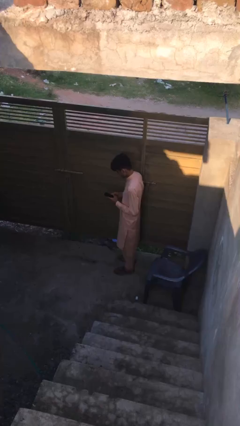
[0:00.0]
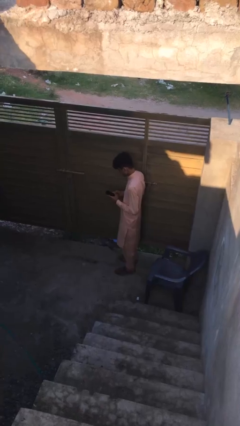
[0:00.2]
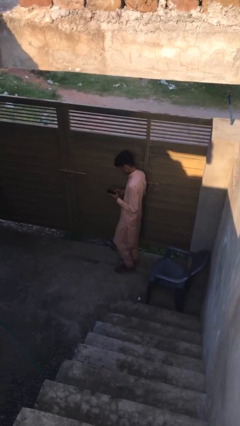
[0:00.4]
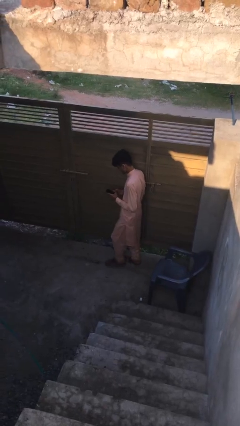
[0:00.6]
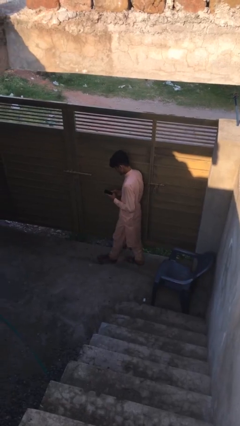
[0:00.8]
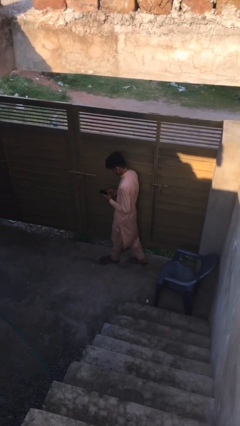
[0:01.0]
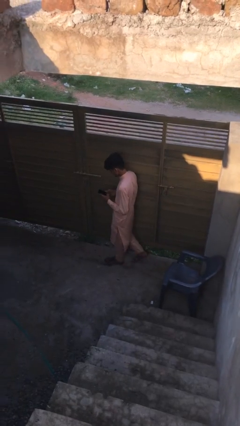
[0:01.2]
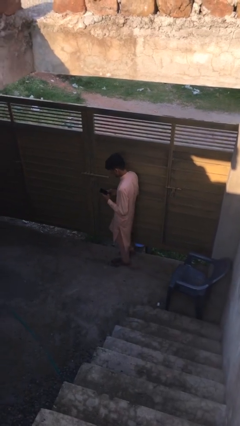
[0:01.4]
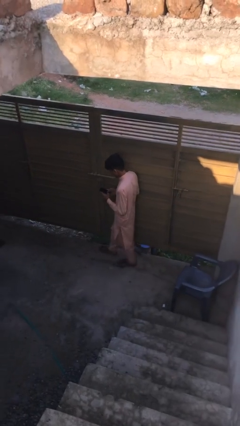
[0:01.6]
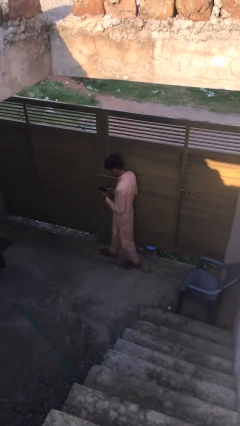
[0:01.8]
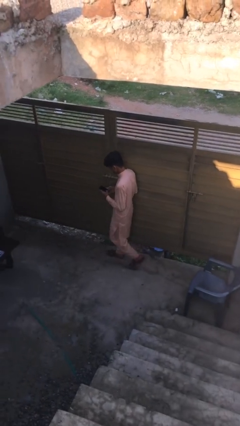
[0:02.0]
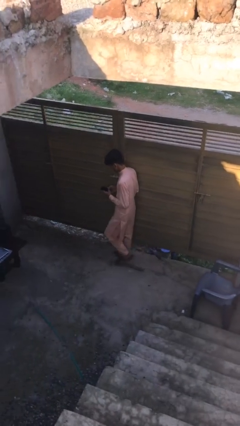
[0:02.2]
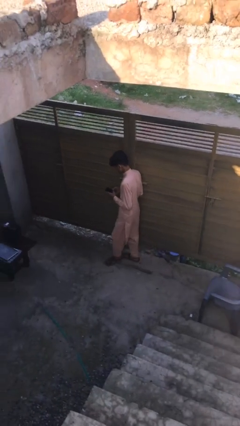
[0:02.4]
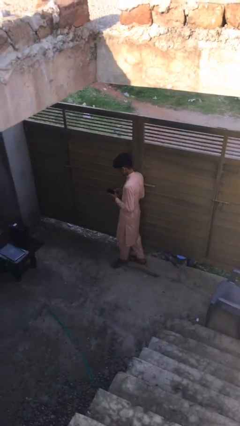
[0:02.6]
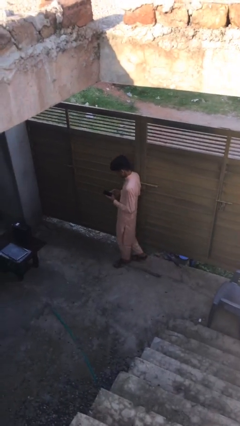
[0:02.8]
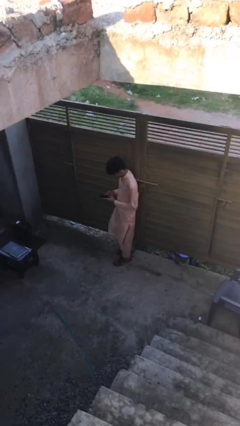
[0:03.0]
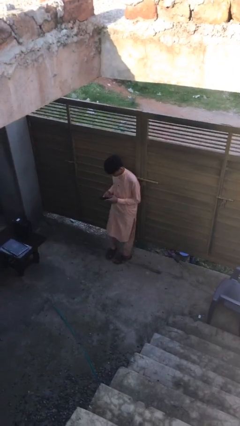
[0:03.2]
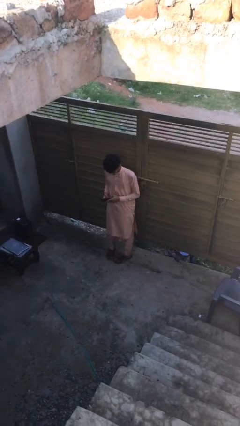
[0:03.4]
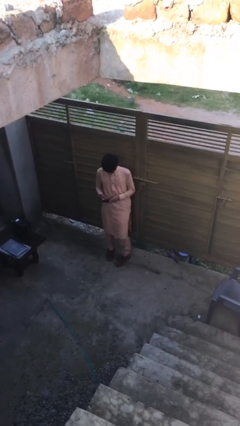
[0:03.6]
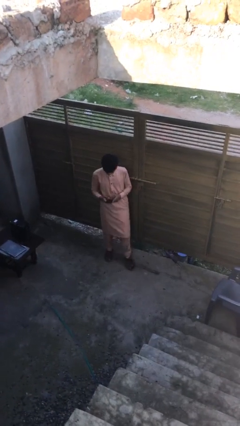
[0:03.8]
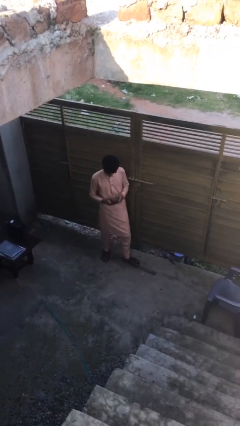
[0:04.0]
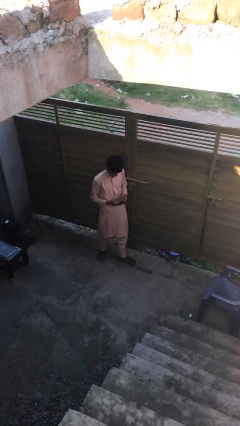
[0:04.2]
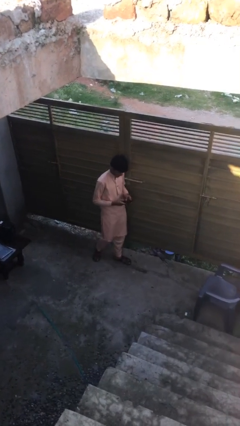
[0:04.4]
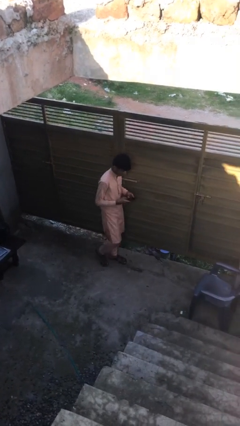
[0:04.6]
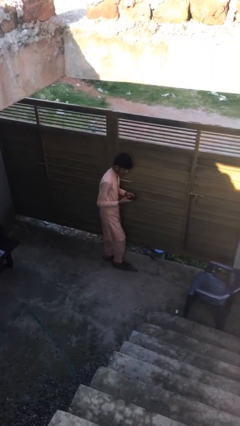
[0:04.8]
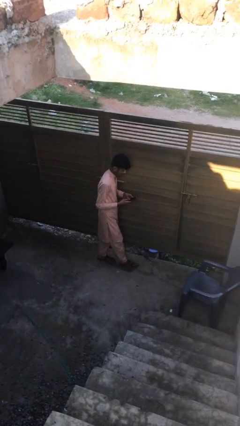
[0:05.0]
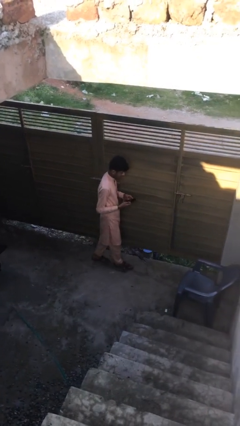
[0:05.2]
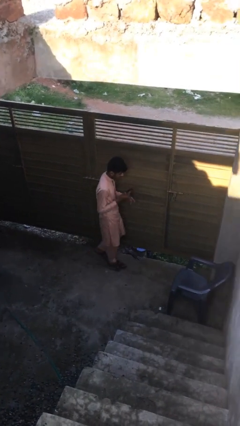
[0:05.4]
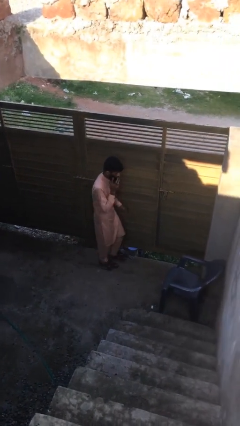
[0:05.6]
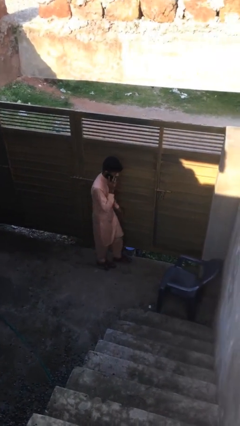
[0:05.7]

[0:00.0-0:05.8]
person texts on phone

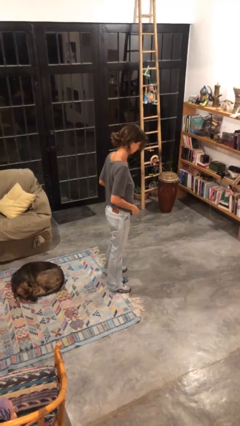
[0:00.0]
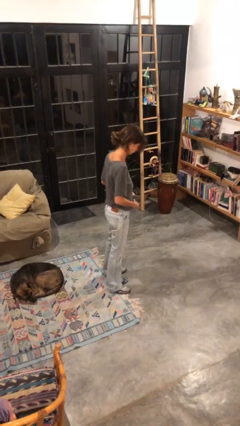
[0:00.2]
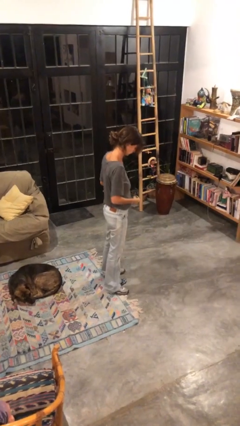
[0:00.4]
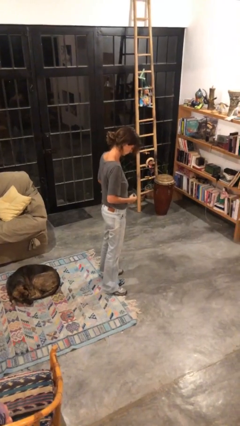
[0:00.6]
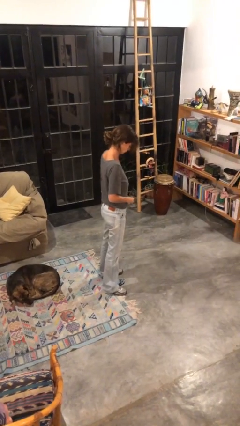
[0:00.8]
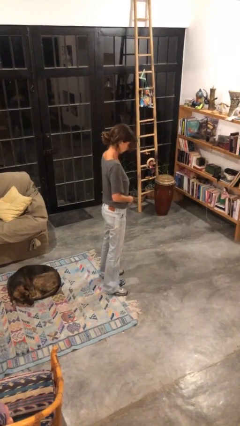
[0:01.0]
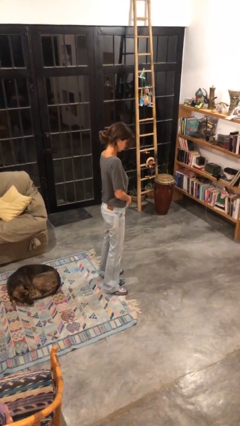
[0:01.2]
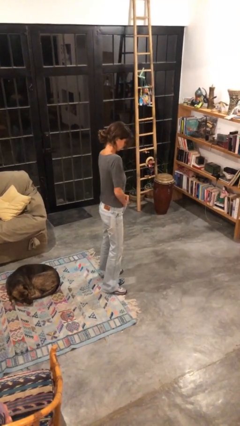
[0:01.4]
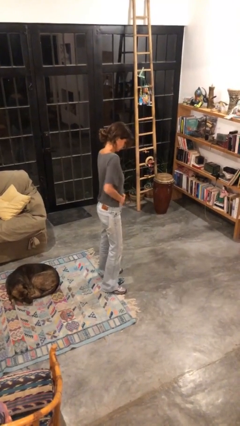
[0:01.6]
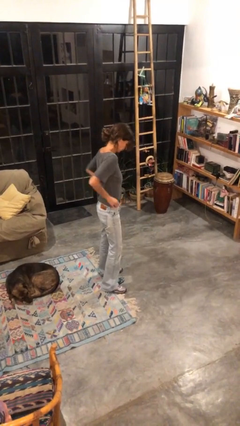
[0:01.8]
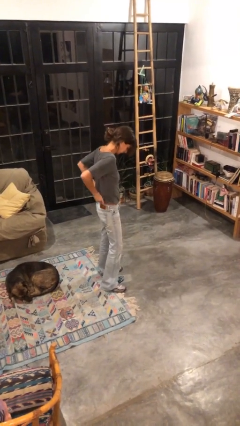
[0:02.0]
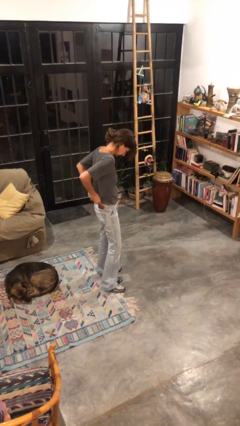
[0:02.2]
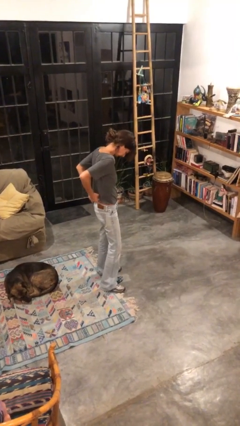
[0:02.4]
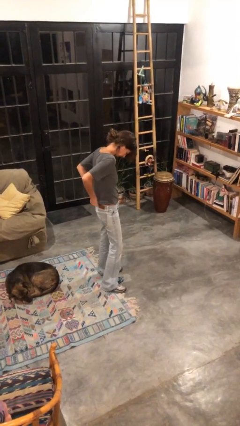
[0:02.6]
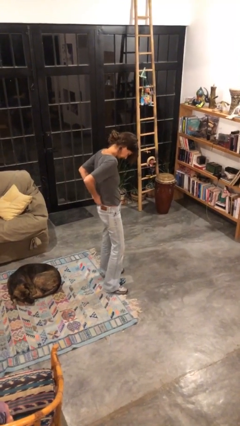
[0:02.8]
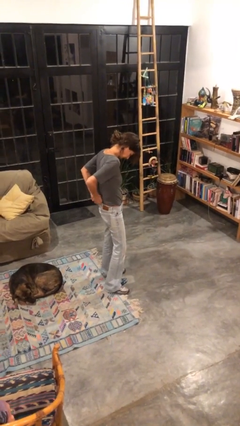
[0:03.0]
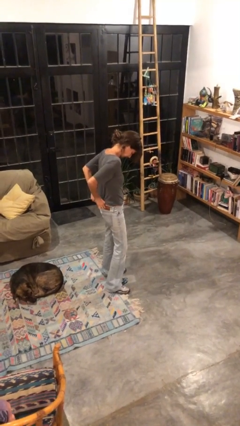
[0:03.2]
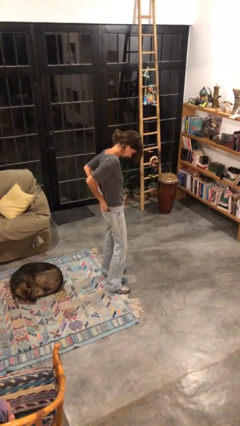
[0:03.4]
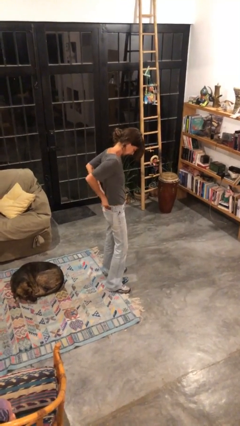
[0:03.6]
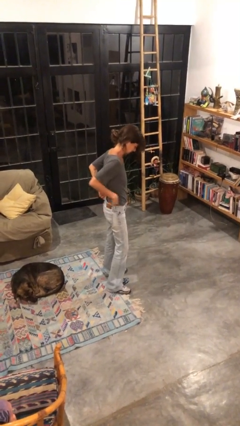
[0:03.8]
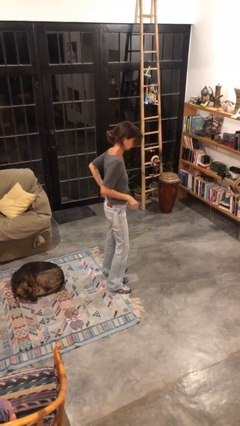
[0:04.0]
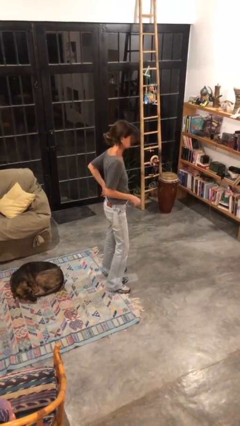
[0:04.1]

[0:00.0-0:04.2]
person tucks in shirt

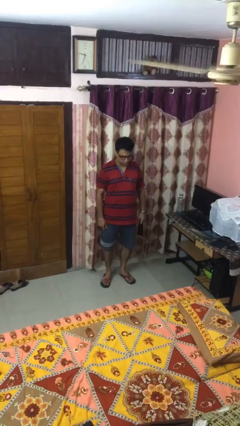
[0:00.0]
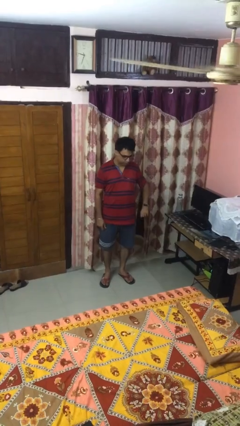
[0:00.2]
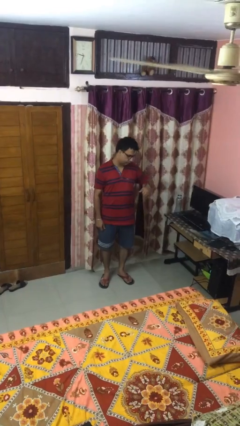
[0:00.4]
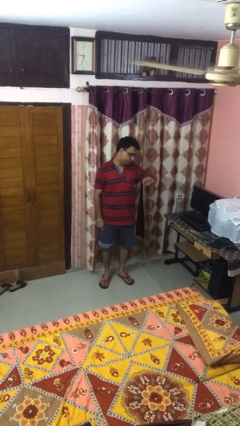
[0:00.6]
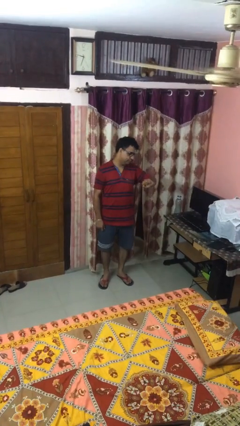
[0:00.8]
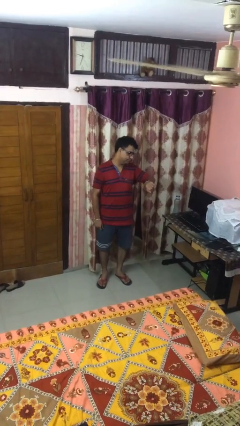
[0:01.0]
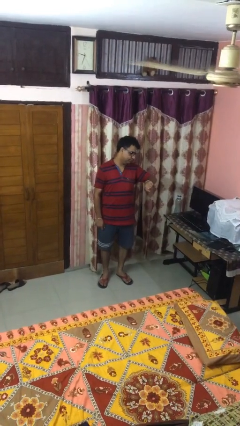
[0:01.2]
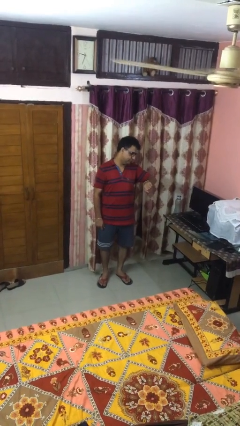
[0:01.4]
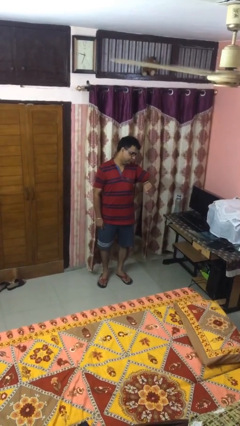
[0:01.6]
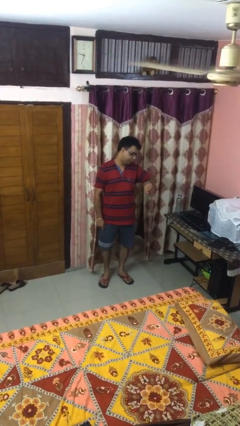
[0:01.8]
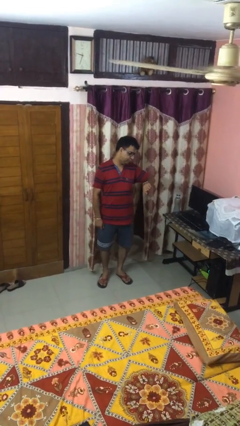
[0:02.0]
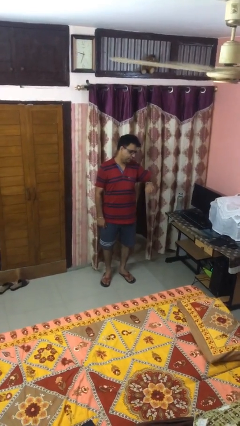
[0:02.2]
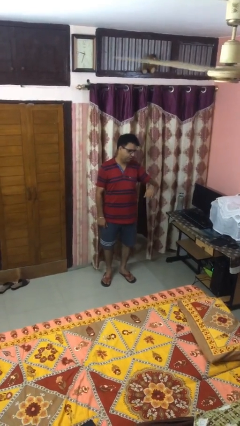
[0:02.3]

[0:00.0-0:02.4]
person looks at wristwatch

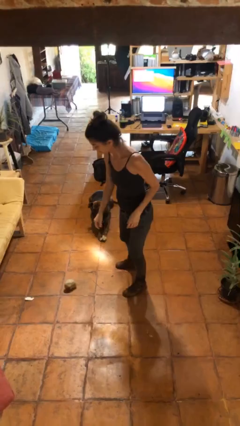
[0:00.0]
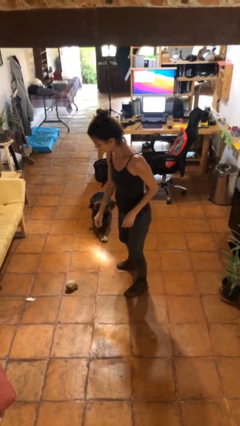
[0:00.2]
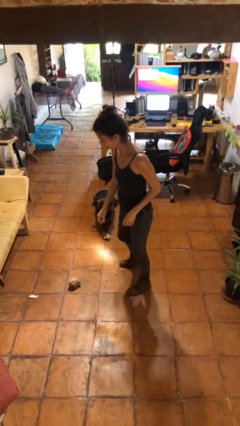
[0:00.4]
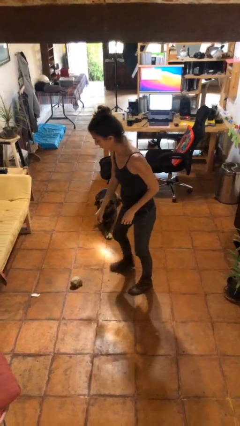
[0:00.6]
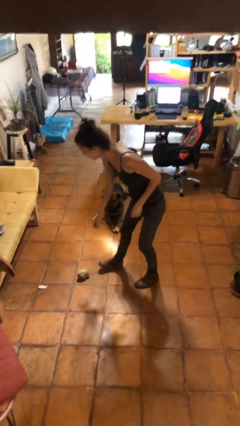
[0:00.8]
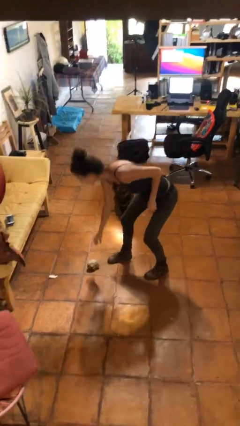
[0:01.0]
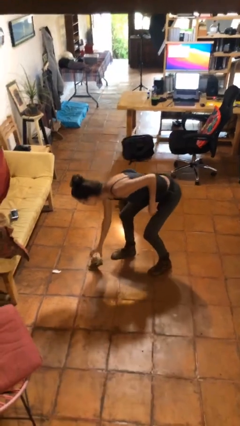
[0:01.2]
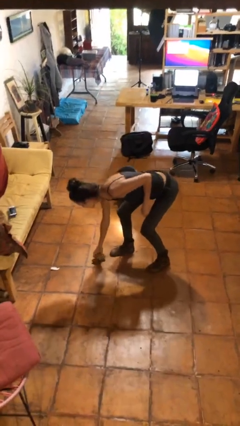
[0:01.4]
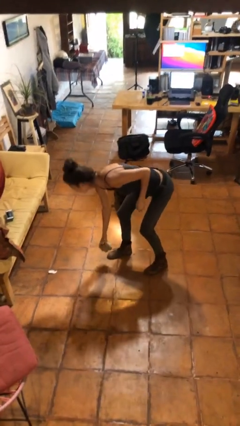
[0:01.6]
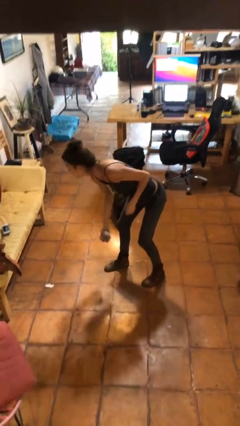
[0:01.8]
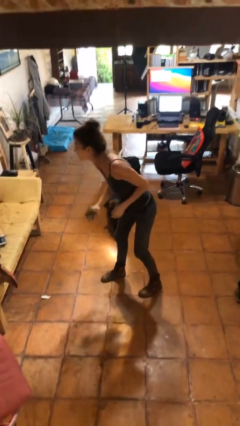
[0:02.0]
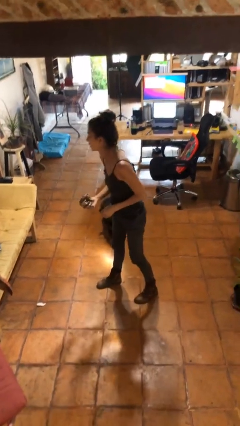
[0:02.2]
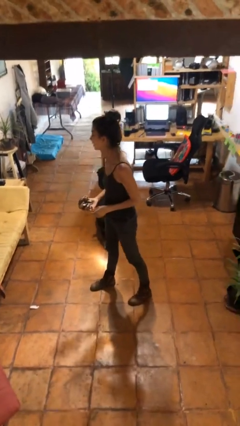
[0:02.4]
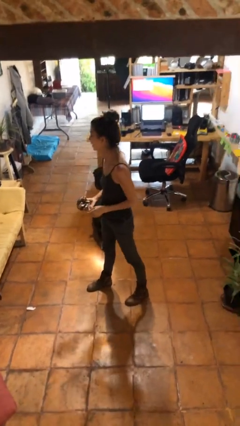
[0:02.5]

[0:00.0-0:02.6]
person picks up object from floor

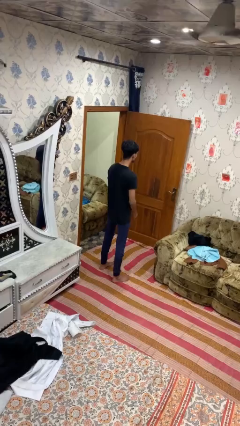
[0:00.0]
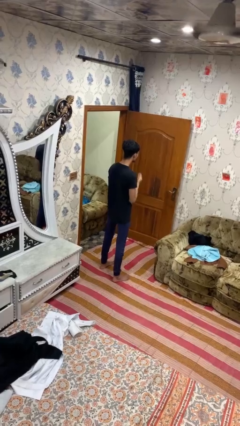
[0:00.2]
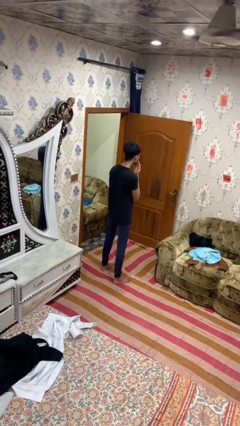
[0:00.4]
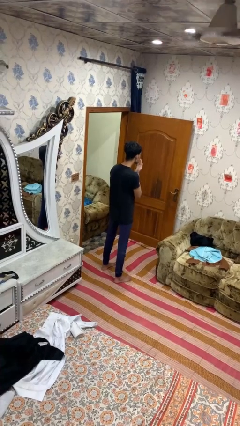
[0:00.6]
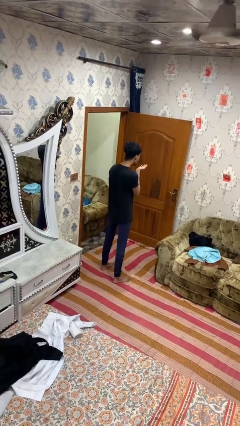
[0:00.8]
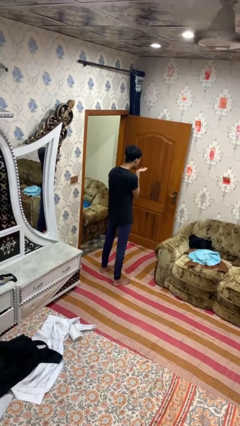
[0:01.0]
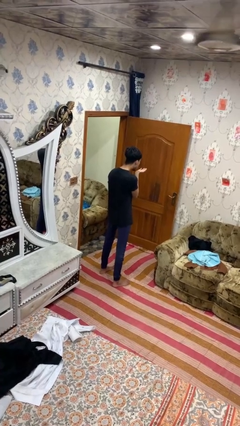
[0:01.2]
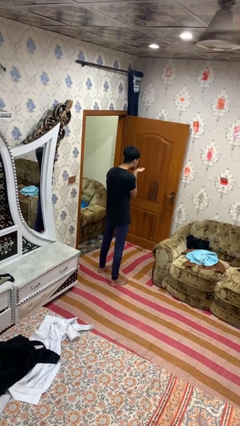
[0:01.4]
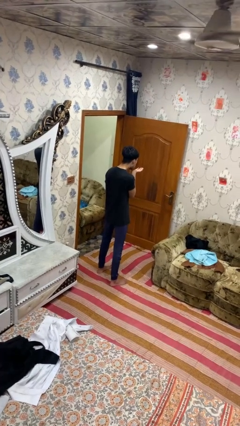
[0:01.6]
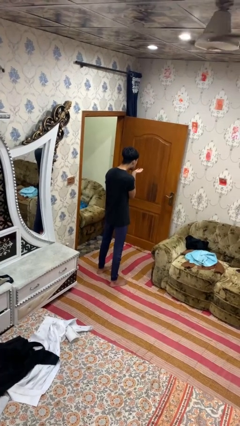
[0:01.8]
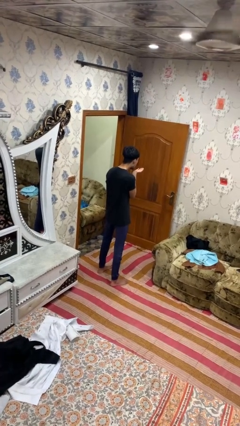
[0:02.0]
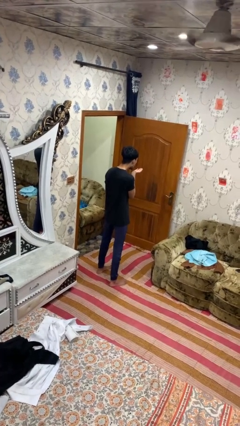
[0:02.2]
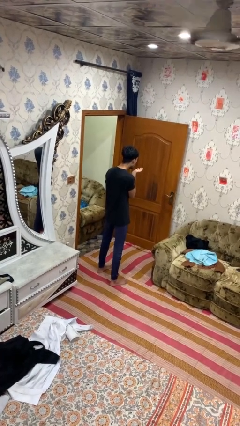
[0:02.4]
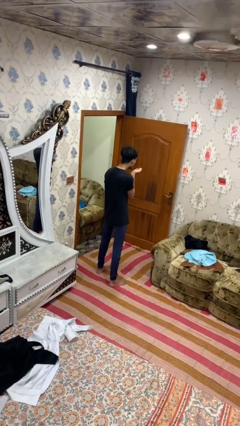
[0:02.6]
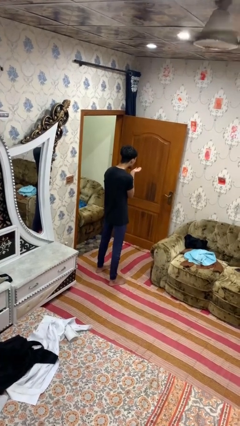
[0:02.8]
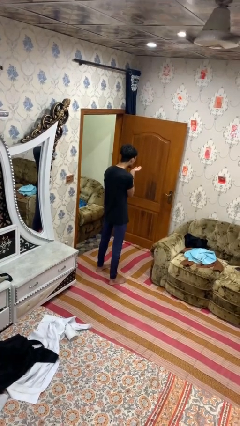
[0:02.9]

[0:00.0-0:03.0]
person gestures blow kiss
